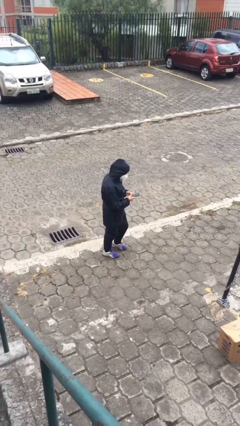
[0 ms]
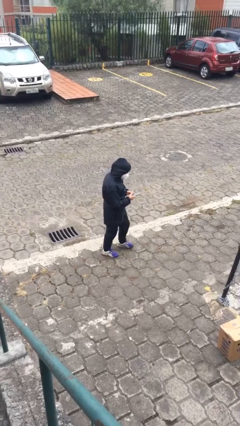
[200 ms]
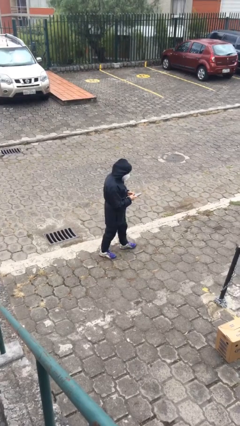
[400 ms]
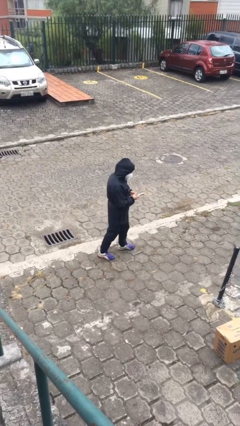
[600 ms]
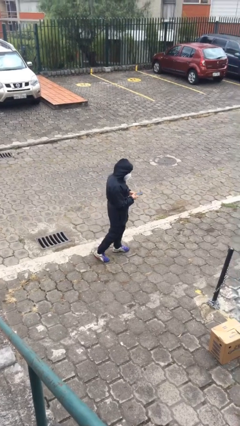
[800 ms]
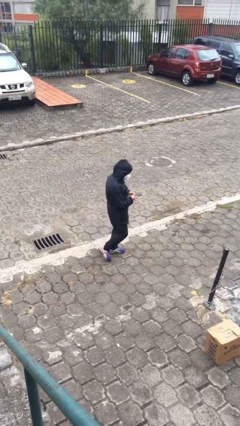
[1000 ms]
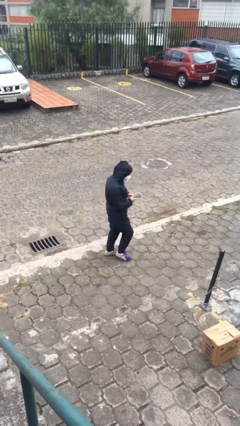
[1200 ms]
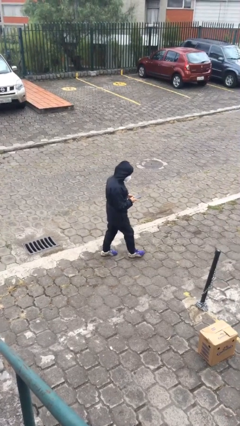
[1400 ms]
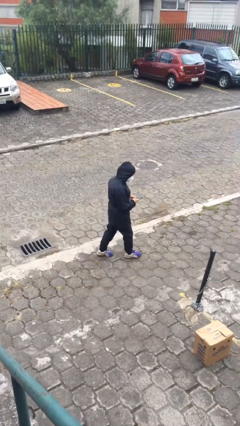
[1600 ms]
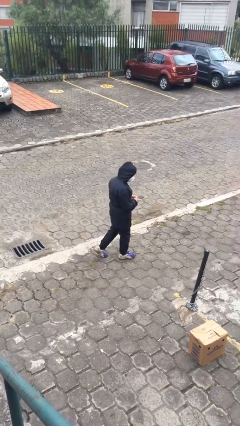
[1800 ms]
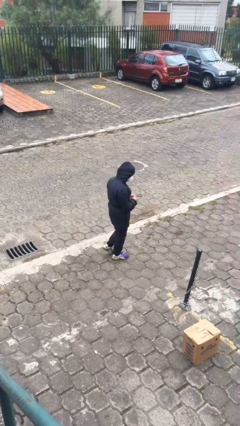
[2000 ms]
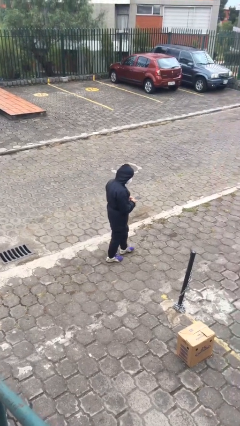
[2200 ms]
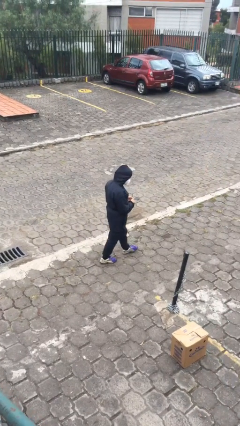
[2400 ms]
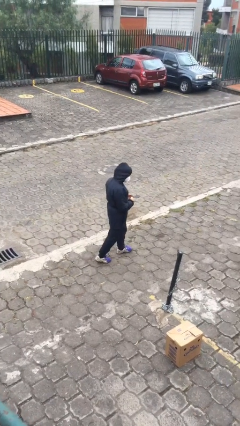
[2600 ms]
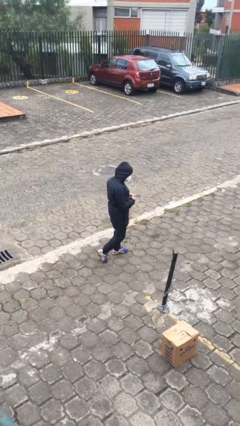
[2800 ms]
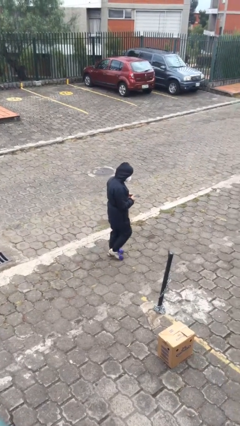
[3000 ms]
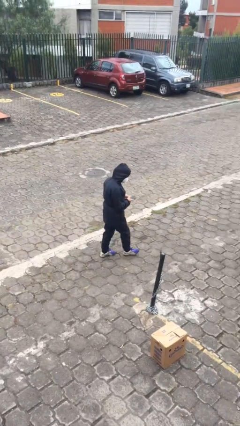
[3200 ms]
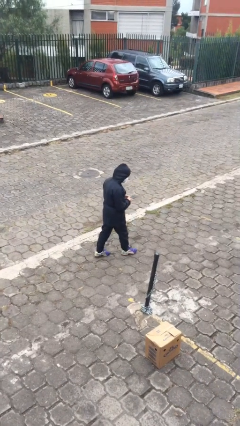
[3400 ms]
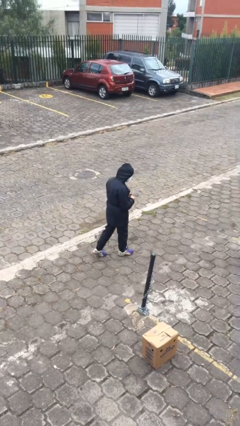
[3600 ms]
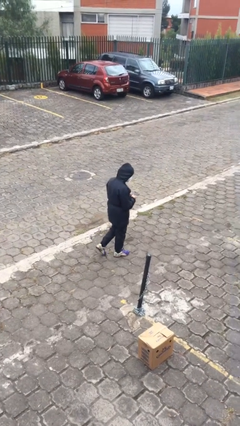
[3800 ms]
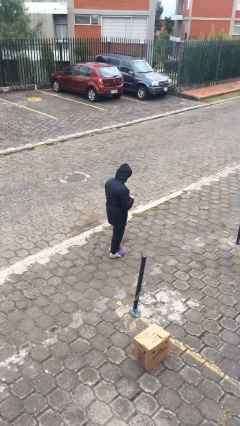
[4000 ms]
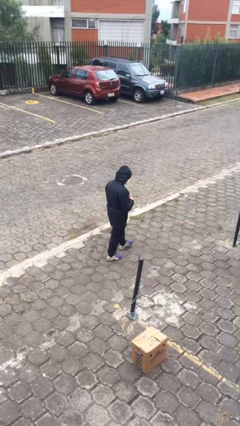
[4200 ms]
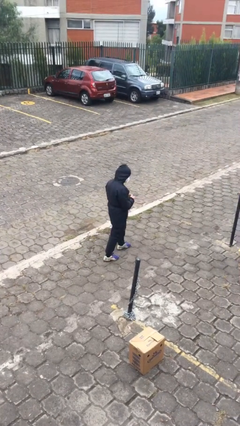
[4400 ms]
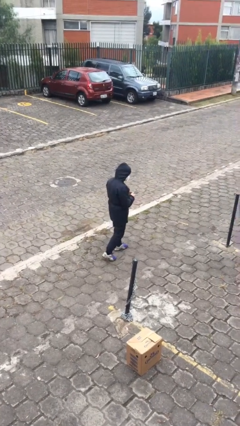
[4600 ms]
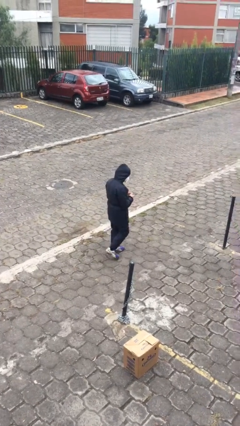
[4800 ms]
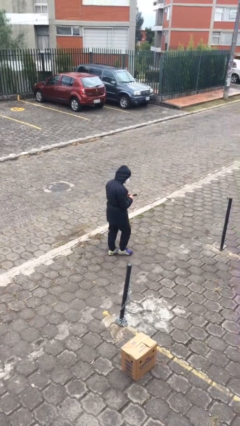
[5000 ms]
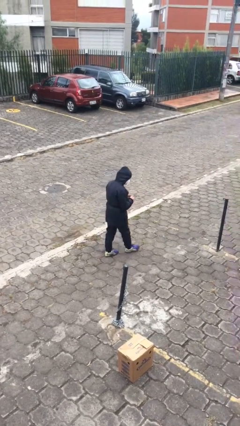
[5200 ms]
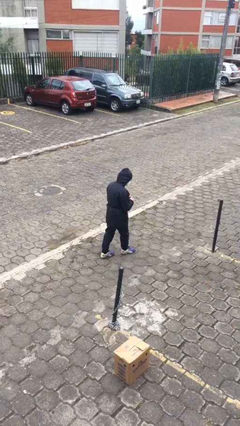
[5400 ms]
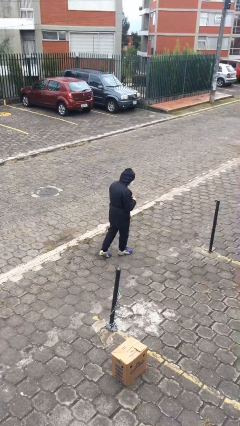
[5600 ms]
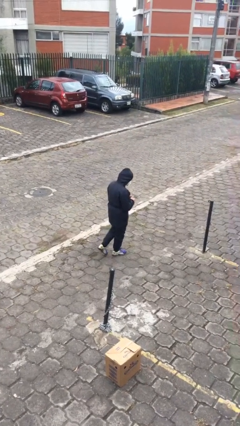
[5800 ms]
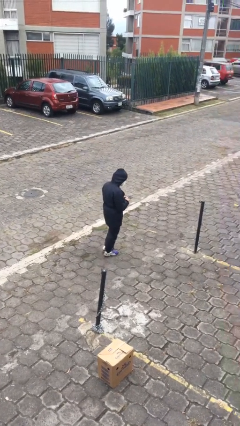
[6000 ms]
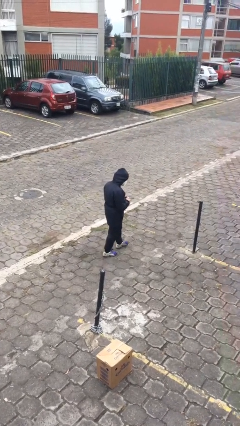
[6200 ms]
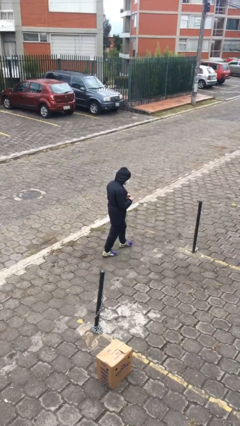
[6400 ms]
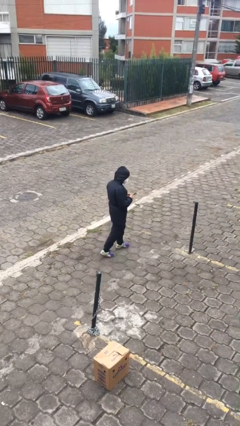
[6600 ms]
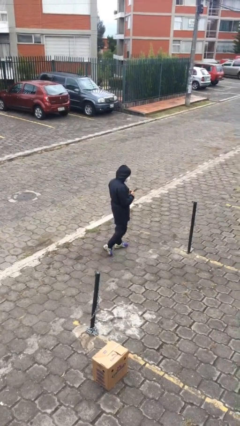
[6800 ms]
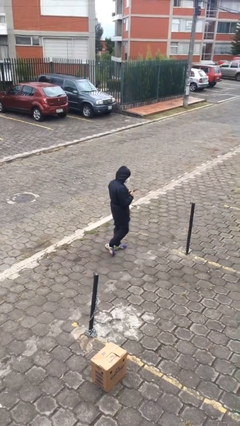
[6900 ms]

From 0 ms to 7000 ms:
person texts on phone

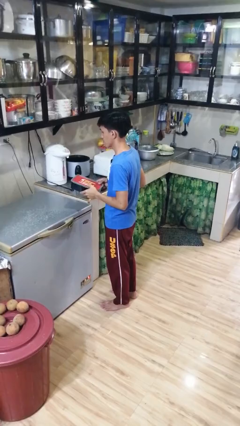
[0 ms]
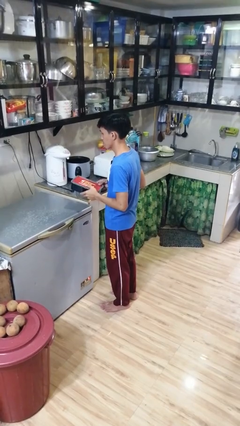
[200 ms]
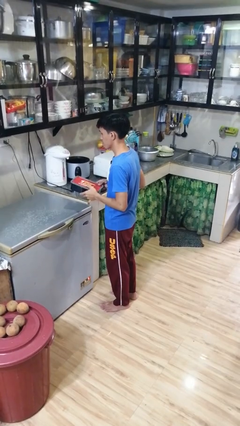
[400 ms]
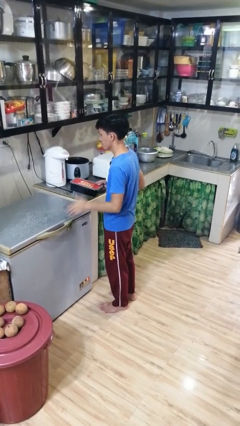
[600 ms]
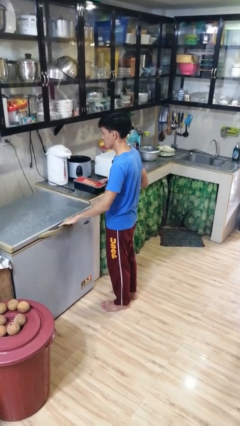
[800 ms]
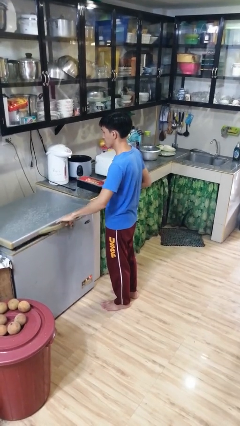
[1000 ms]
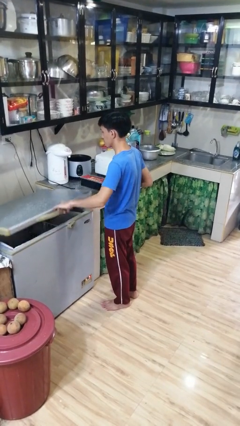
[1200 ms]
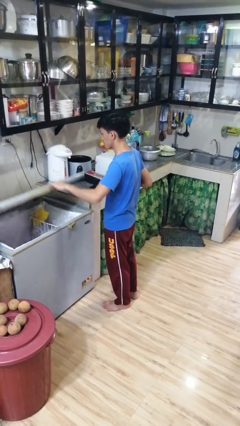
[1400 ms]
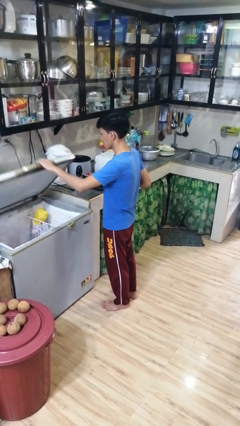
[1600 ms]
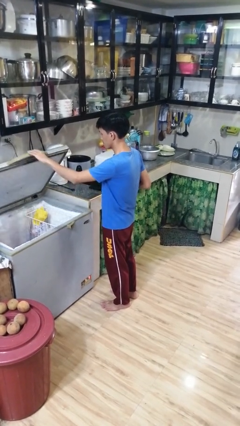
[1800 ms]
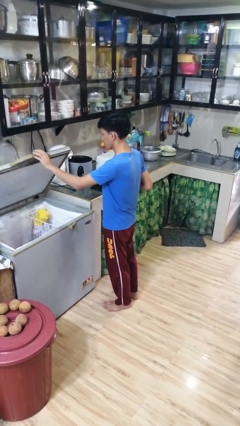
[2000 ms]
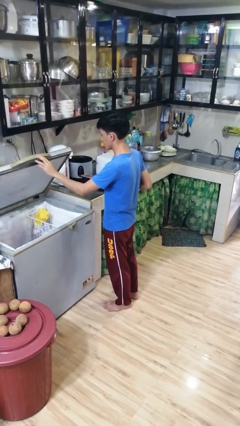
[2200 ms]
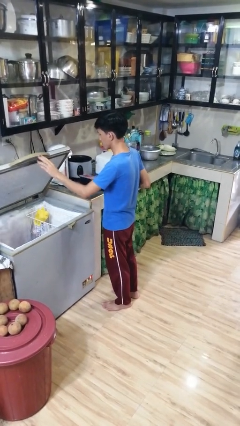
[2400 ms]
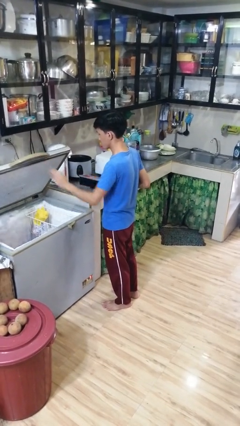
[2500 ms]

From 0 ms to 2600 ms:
person opens refrigerator

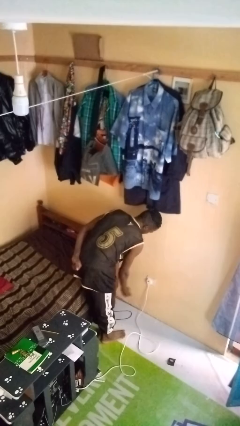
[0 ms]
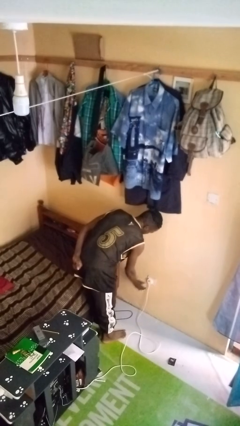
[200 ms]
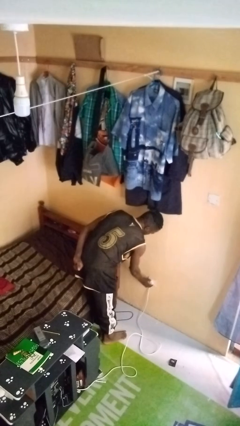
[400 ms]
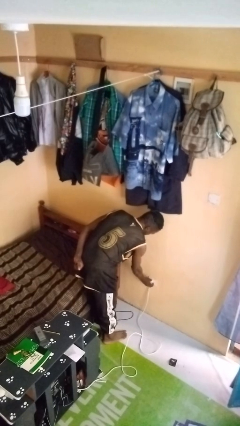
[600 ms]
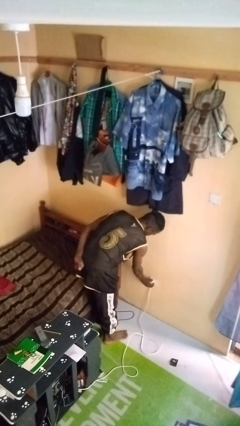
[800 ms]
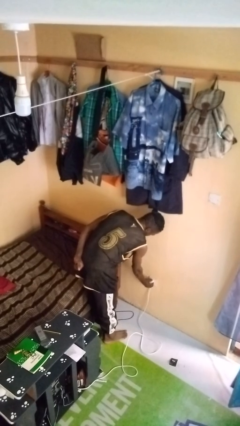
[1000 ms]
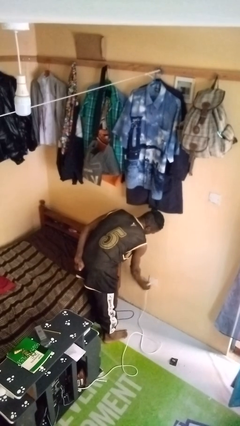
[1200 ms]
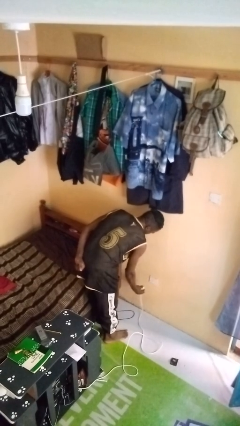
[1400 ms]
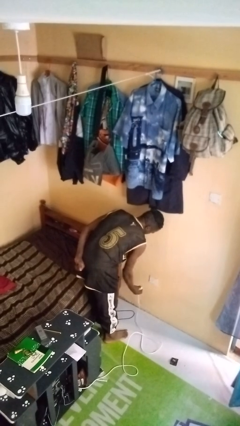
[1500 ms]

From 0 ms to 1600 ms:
person unplugs from electrical socket

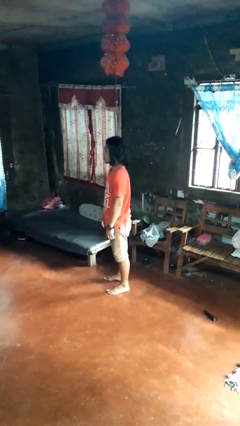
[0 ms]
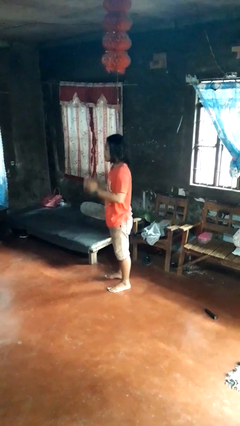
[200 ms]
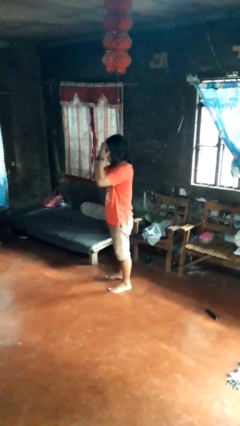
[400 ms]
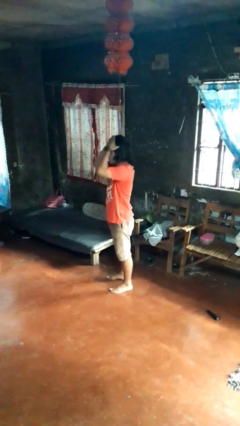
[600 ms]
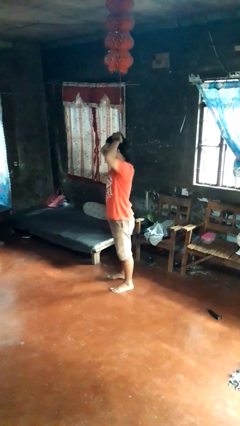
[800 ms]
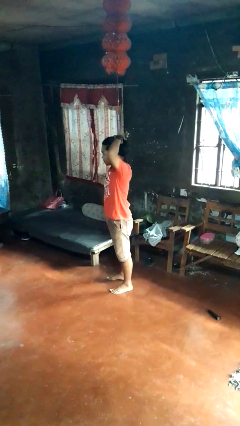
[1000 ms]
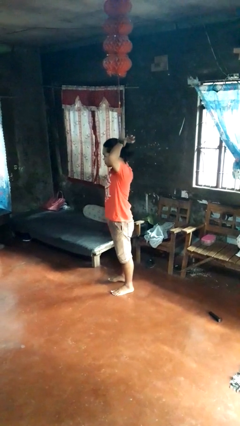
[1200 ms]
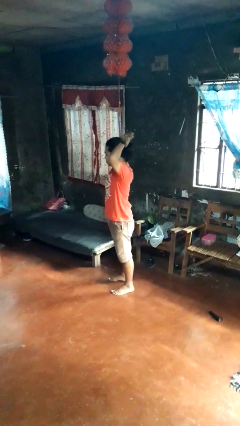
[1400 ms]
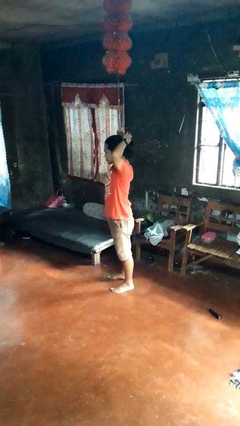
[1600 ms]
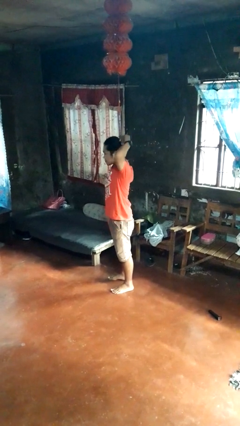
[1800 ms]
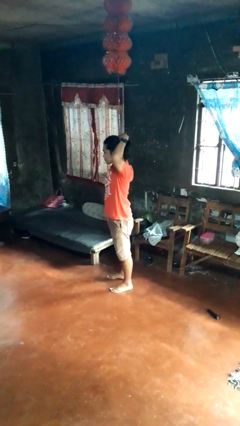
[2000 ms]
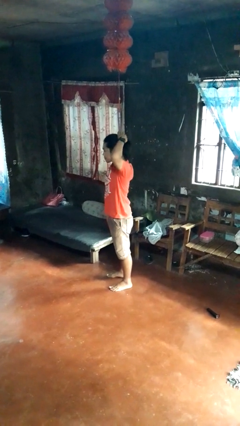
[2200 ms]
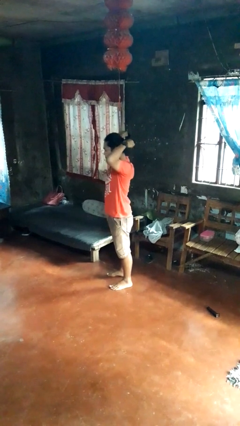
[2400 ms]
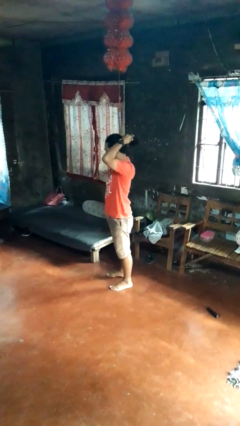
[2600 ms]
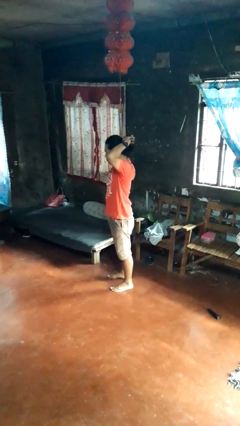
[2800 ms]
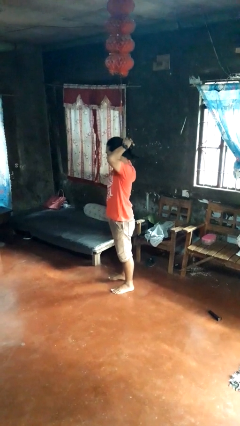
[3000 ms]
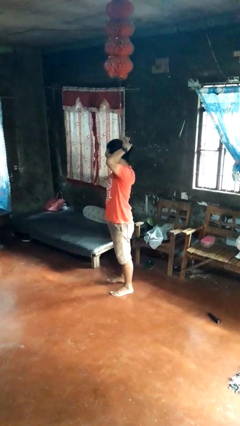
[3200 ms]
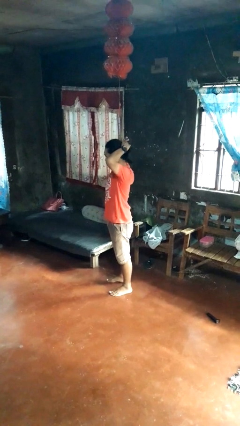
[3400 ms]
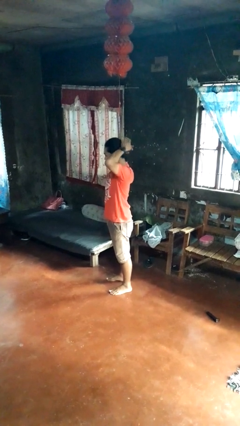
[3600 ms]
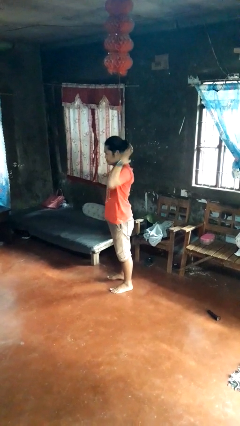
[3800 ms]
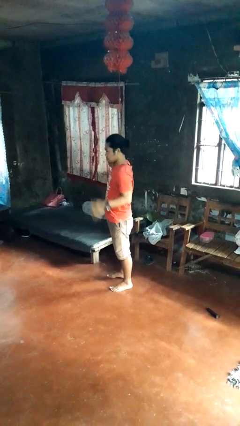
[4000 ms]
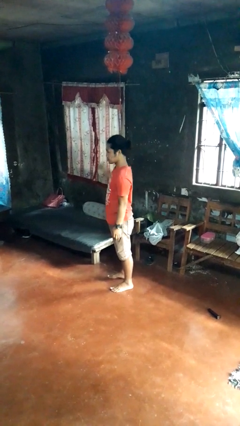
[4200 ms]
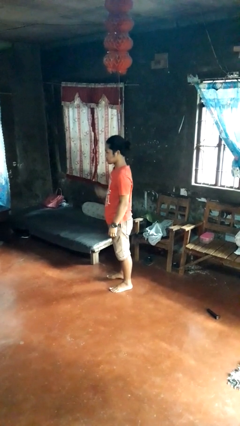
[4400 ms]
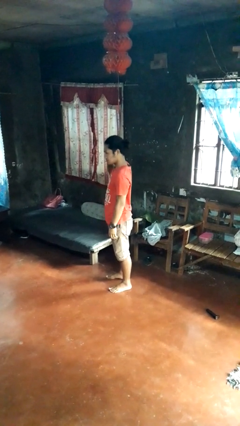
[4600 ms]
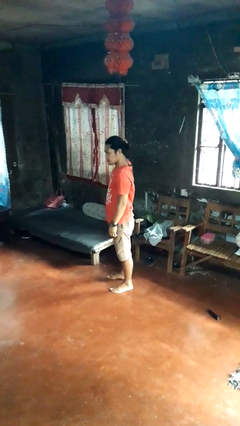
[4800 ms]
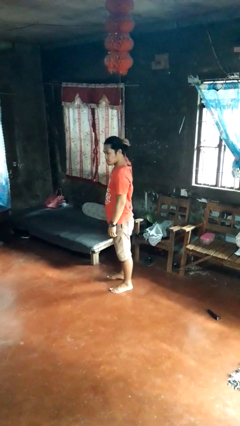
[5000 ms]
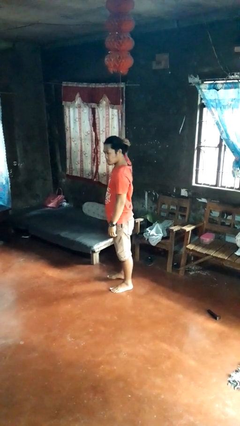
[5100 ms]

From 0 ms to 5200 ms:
person puts hair in ponytail

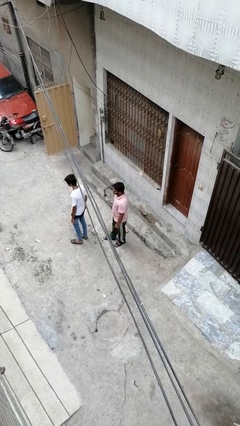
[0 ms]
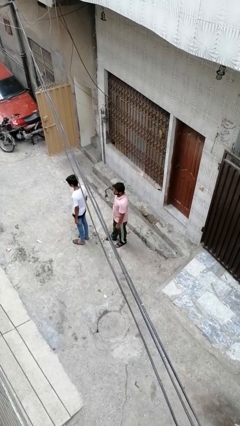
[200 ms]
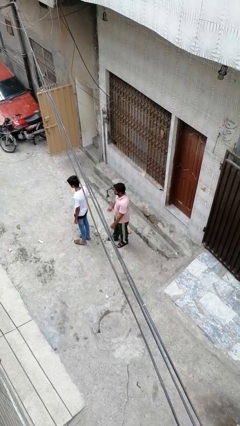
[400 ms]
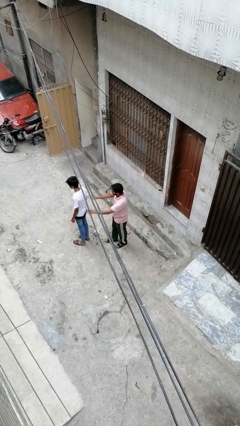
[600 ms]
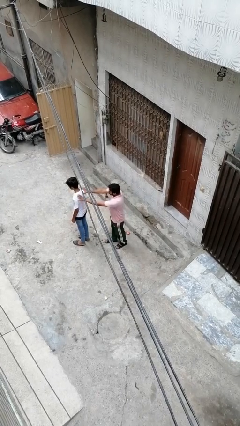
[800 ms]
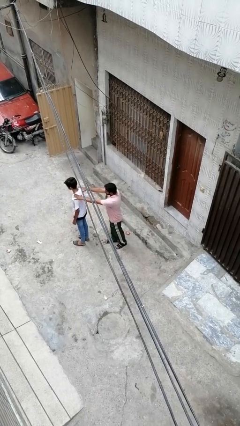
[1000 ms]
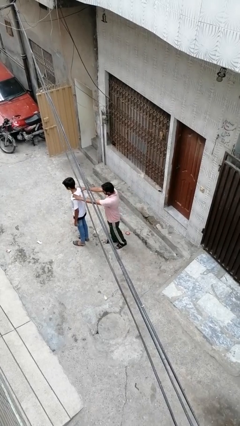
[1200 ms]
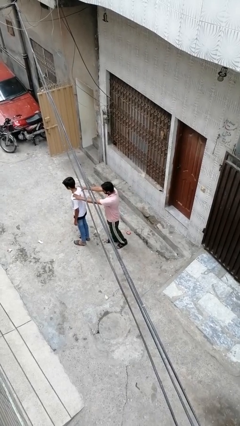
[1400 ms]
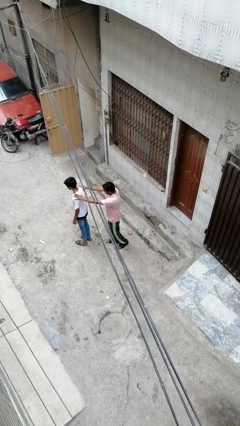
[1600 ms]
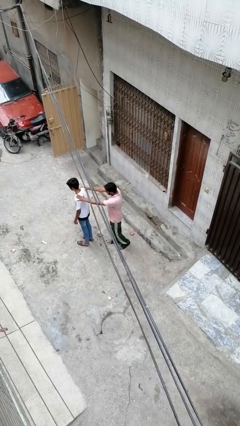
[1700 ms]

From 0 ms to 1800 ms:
person grabs person by shoulder
